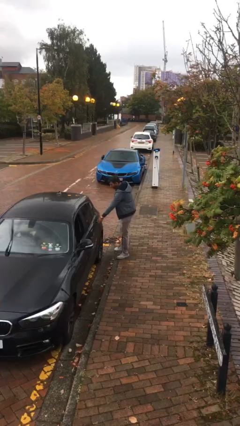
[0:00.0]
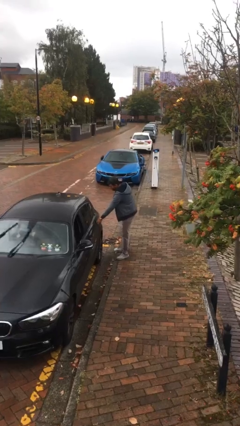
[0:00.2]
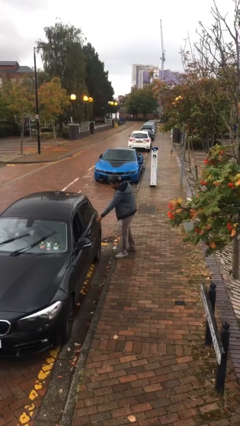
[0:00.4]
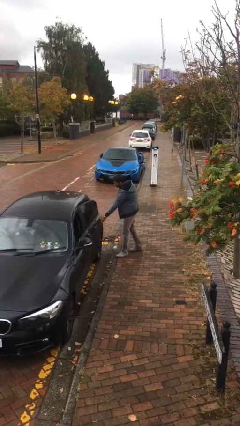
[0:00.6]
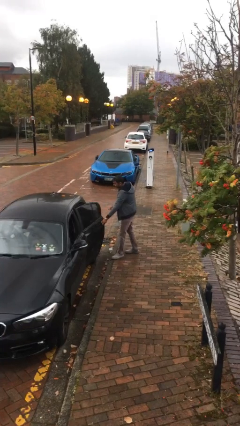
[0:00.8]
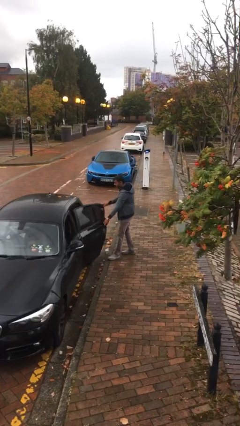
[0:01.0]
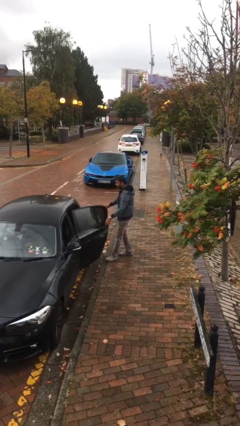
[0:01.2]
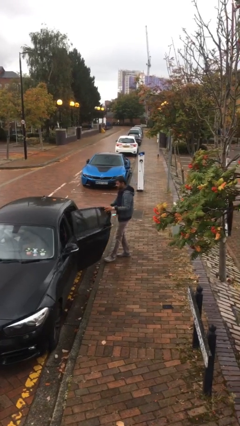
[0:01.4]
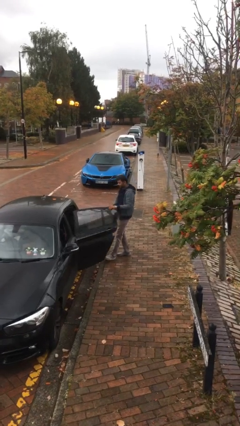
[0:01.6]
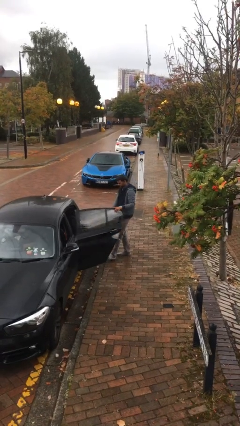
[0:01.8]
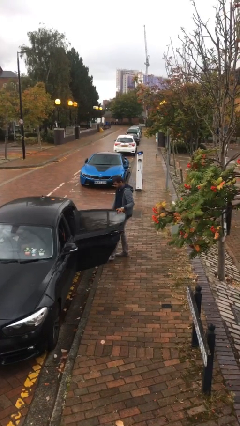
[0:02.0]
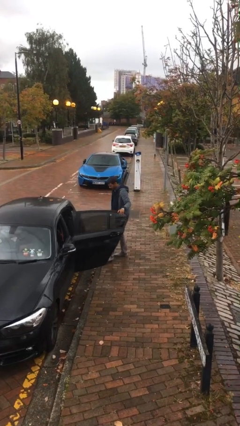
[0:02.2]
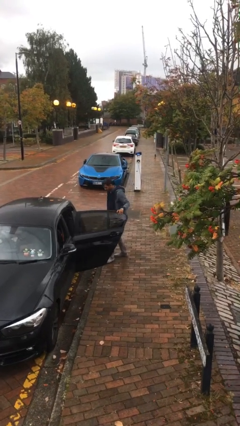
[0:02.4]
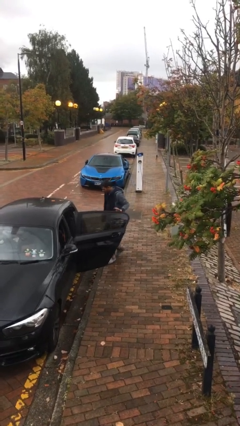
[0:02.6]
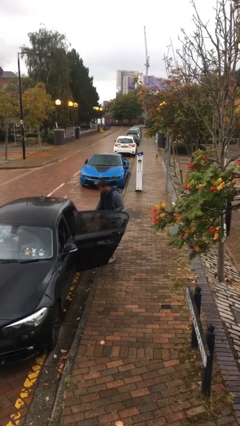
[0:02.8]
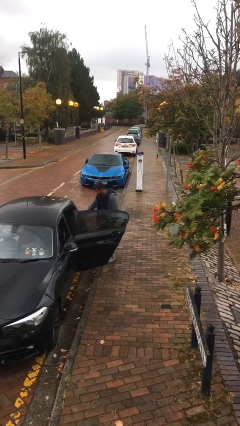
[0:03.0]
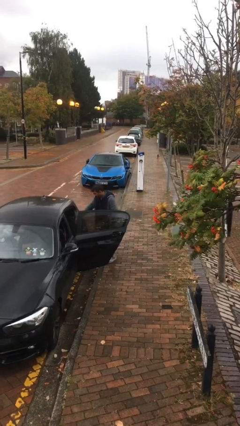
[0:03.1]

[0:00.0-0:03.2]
person opens car door

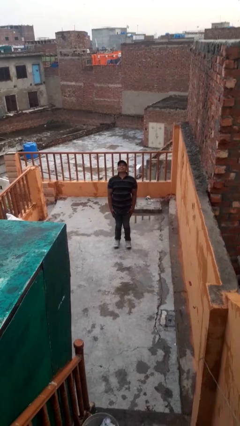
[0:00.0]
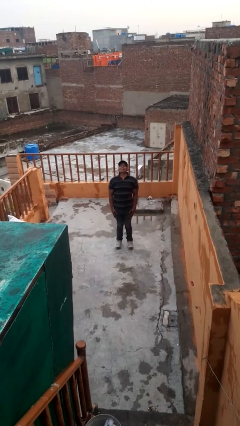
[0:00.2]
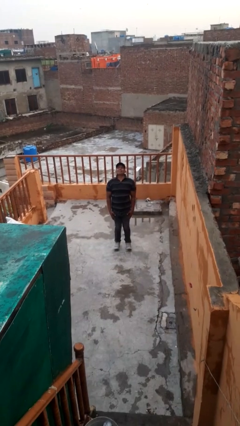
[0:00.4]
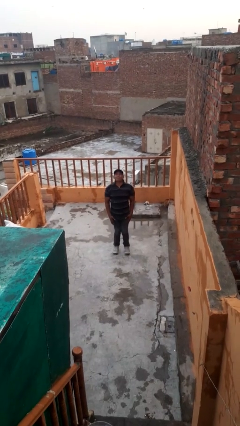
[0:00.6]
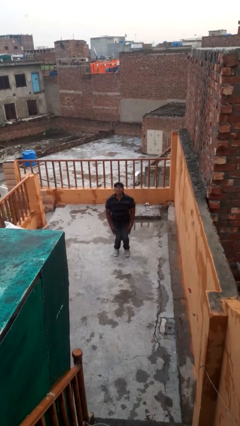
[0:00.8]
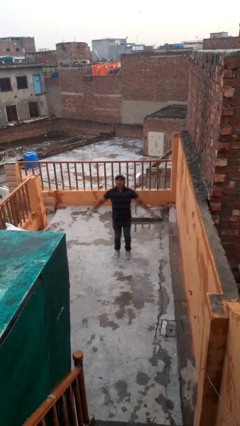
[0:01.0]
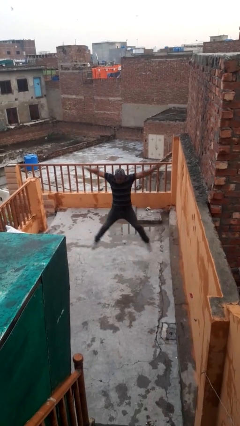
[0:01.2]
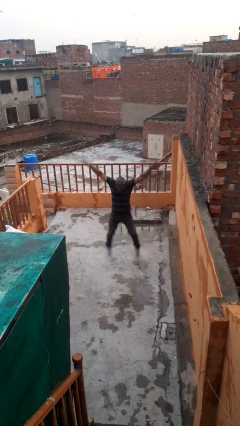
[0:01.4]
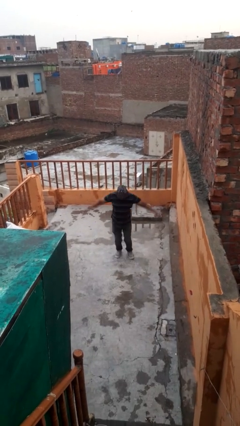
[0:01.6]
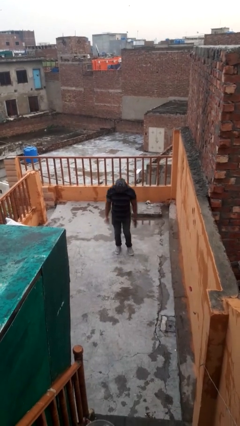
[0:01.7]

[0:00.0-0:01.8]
person exercises with jumping jacks

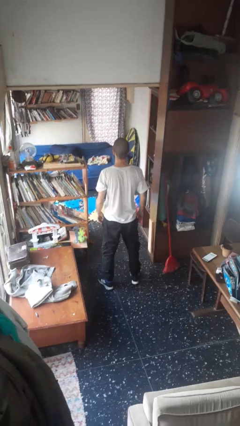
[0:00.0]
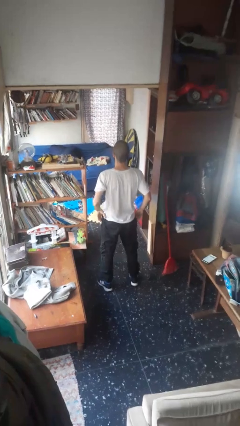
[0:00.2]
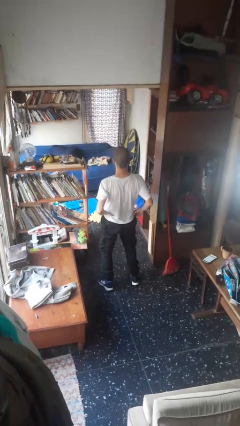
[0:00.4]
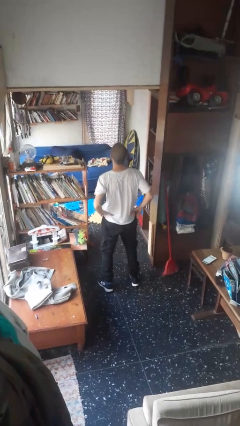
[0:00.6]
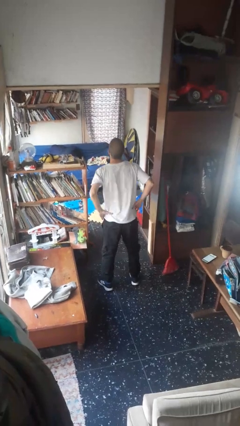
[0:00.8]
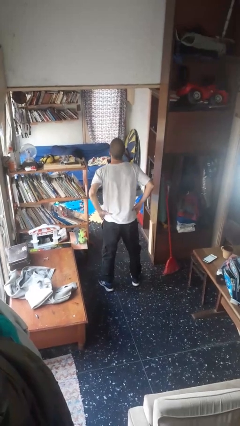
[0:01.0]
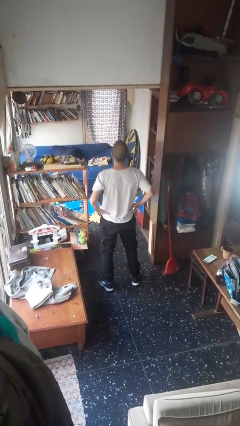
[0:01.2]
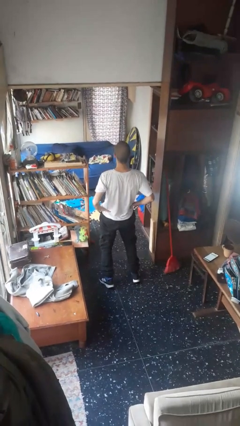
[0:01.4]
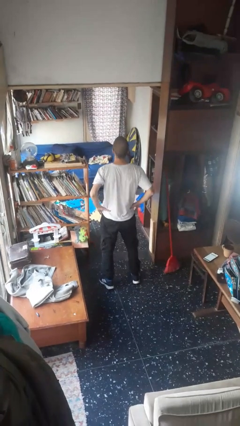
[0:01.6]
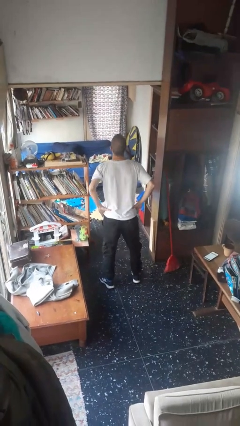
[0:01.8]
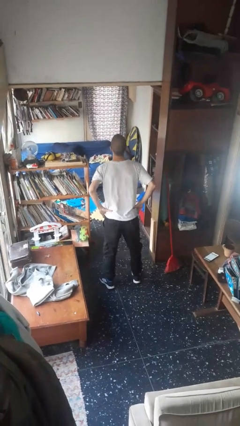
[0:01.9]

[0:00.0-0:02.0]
person wiggles hips

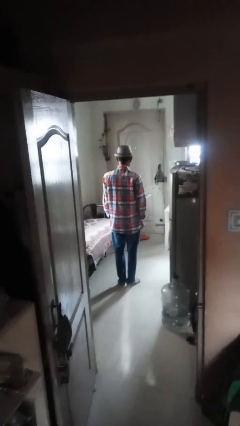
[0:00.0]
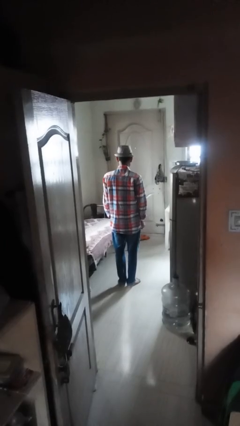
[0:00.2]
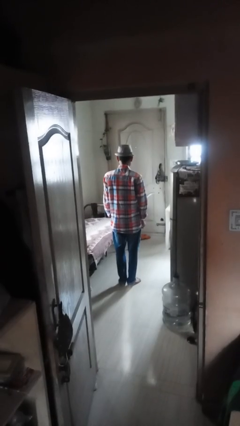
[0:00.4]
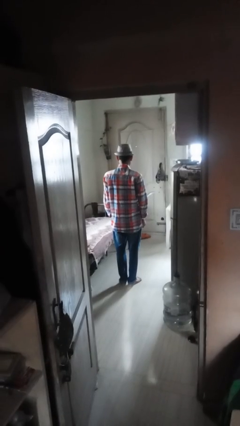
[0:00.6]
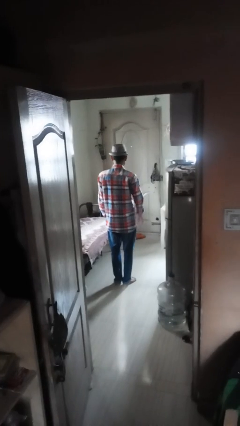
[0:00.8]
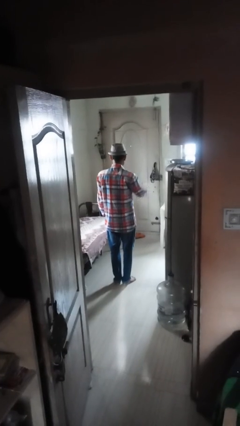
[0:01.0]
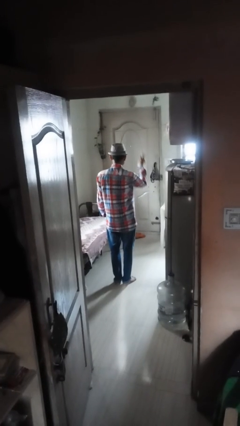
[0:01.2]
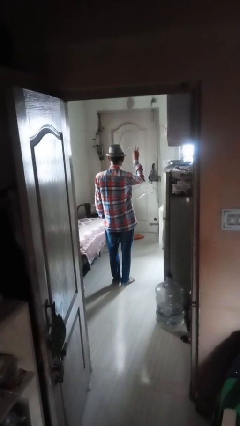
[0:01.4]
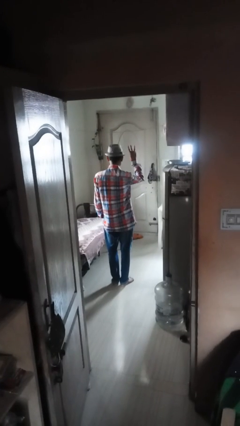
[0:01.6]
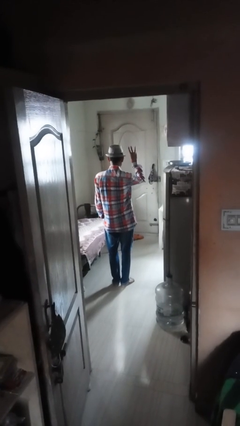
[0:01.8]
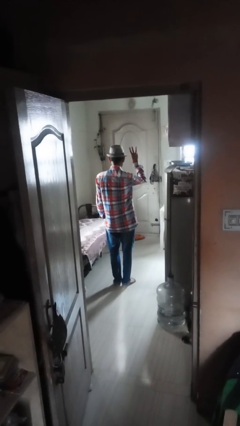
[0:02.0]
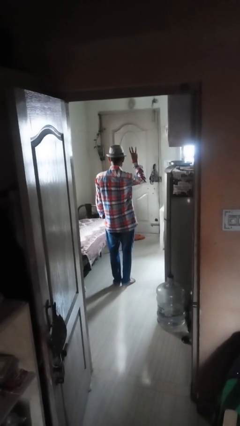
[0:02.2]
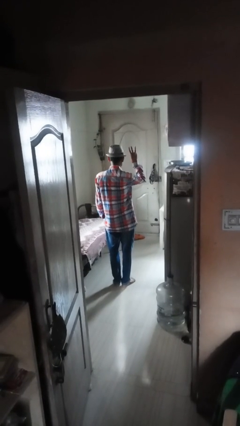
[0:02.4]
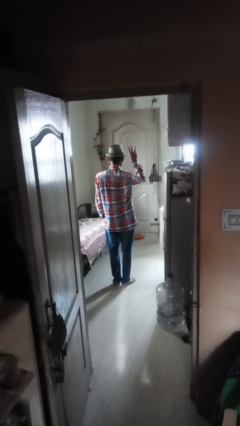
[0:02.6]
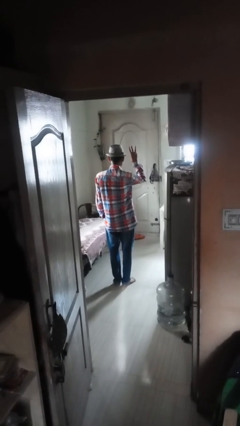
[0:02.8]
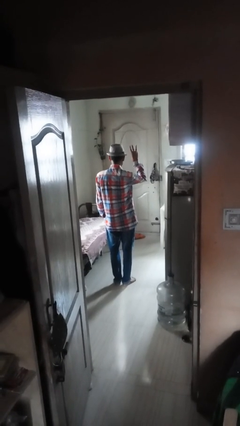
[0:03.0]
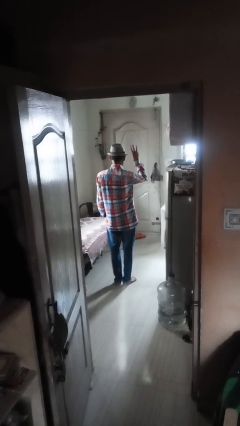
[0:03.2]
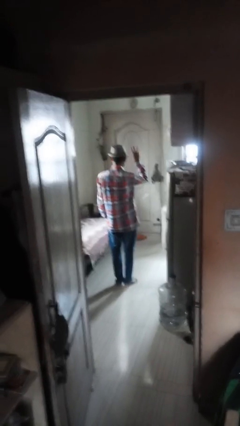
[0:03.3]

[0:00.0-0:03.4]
person gestures number three

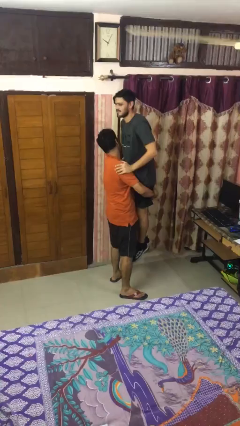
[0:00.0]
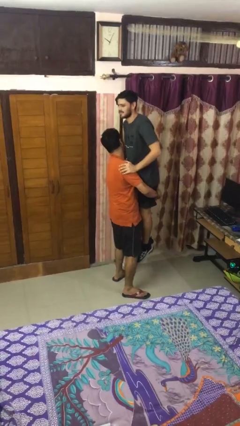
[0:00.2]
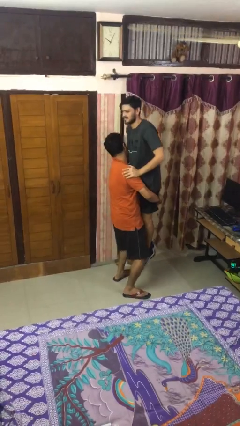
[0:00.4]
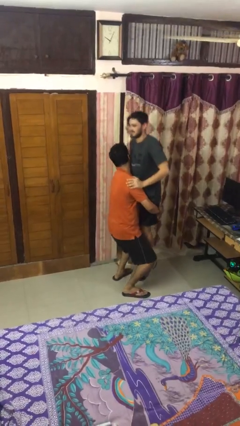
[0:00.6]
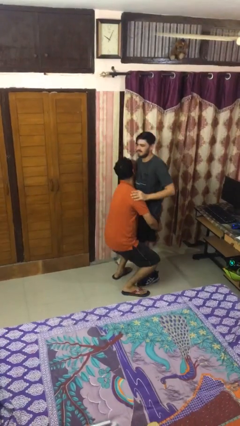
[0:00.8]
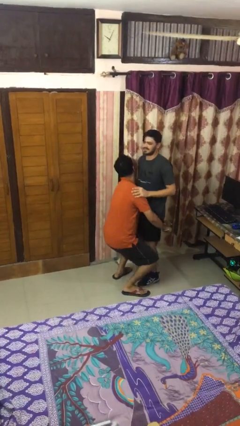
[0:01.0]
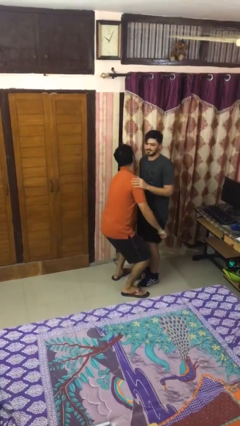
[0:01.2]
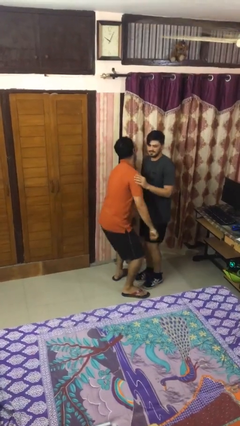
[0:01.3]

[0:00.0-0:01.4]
person puts down person

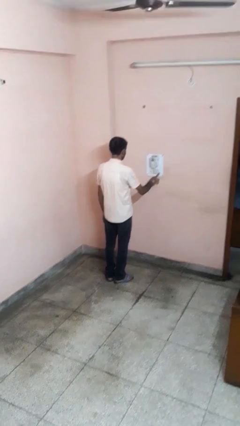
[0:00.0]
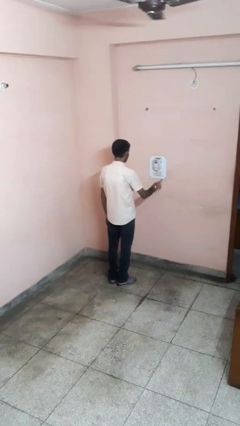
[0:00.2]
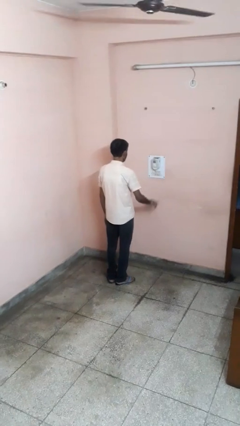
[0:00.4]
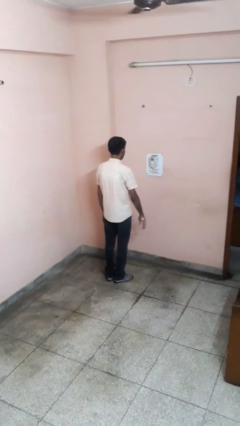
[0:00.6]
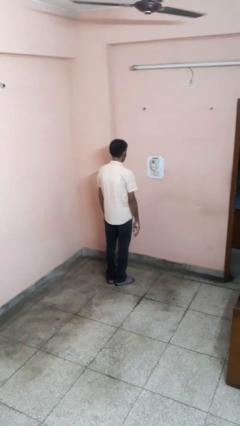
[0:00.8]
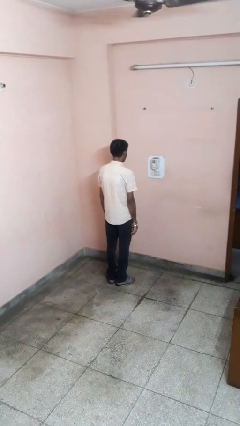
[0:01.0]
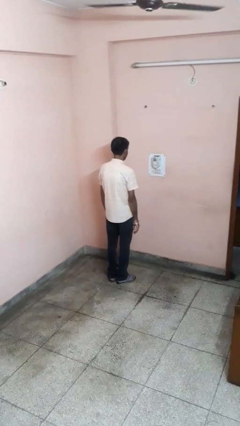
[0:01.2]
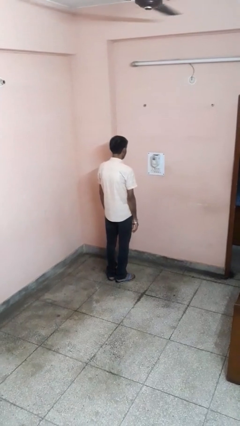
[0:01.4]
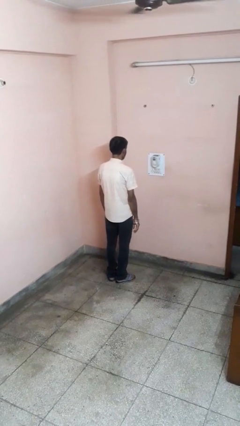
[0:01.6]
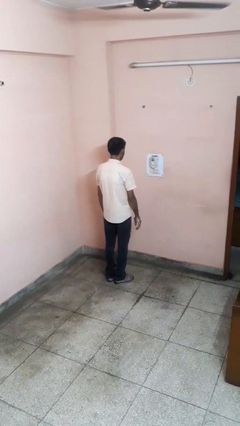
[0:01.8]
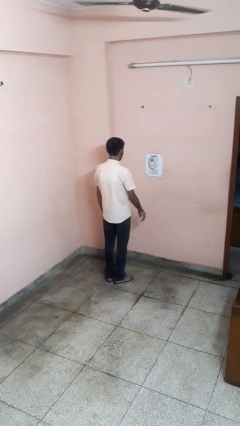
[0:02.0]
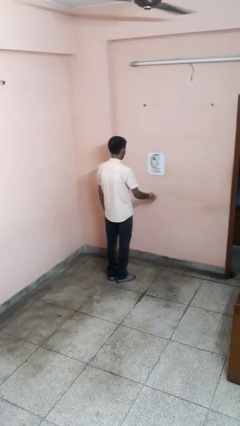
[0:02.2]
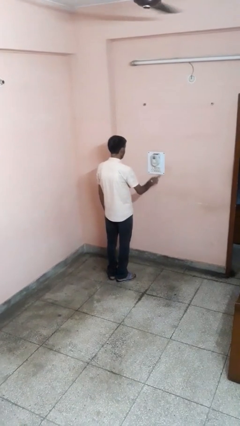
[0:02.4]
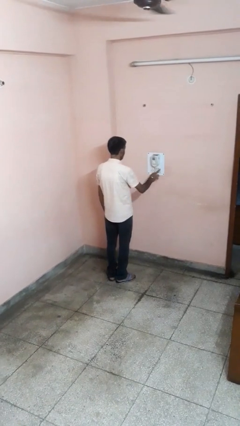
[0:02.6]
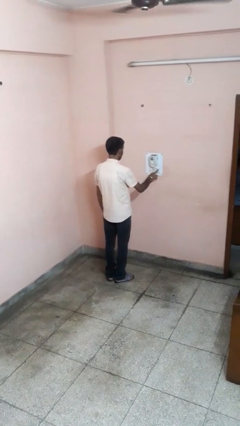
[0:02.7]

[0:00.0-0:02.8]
person turns on fan

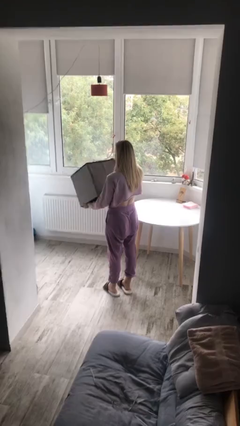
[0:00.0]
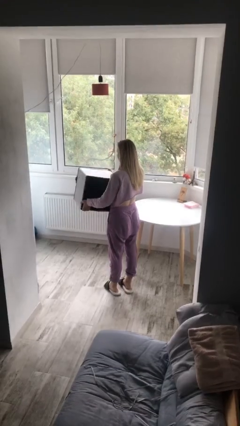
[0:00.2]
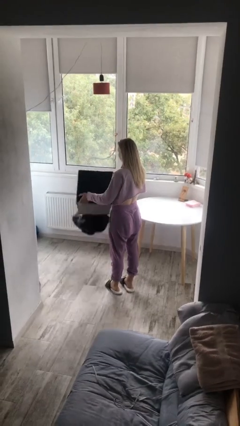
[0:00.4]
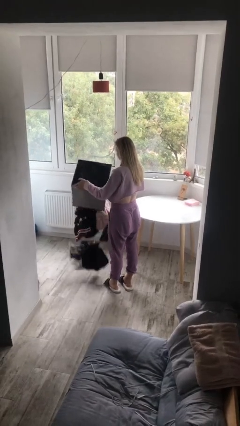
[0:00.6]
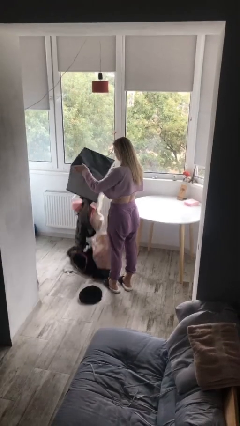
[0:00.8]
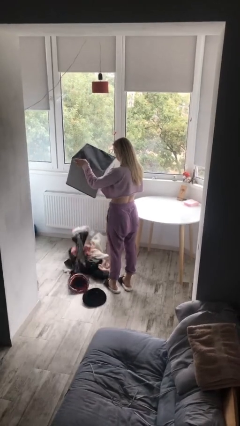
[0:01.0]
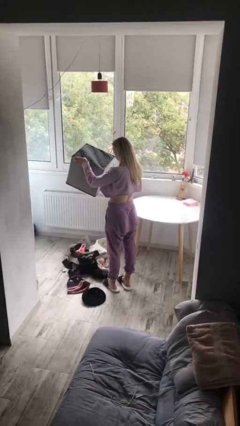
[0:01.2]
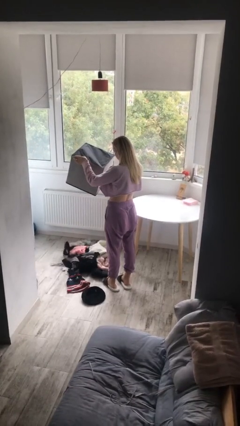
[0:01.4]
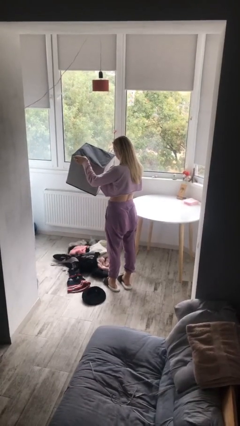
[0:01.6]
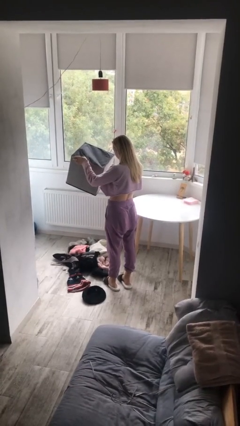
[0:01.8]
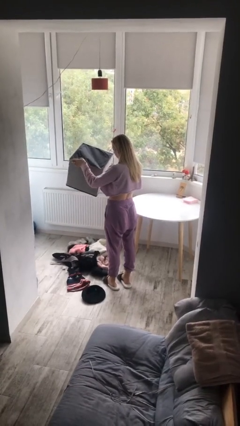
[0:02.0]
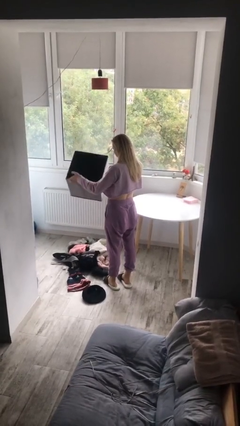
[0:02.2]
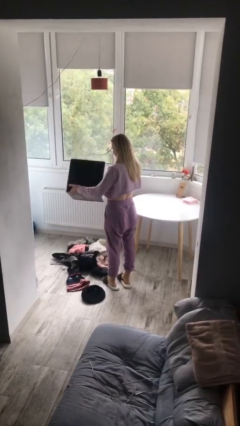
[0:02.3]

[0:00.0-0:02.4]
person unloads box onto floor

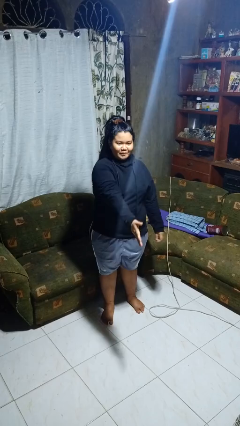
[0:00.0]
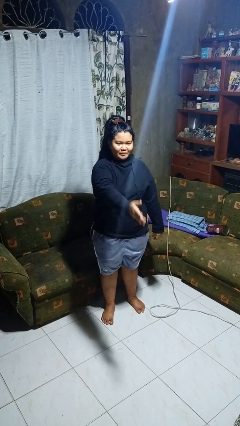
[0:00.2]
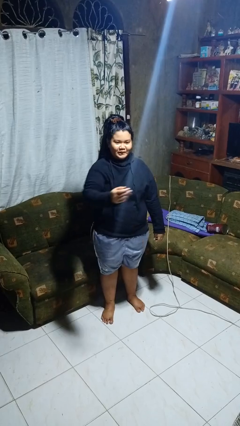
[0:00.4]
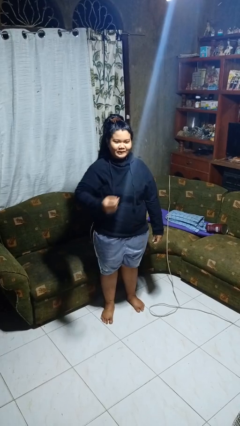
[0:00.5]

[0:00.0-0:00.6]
person karate chop
